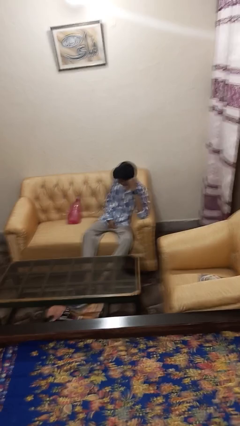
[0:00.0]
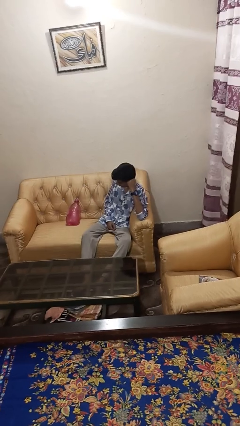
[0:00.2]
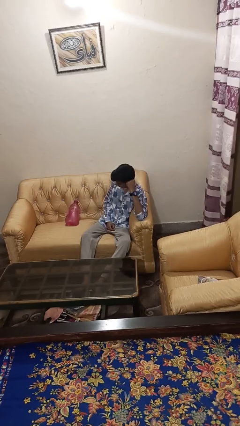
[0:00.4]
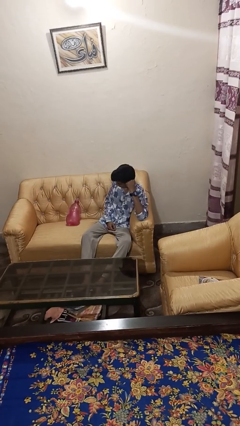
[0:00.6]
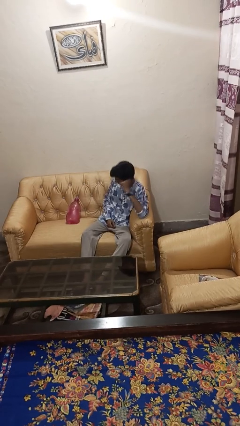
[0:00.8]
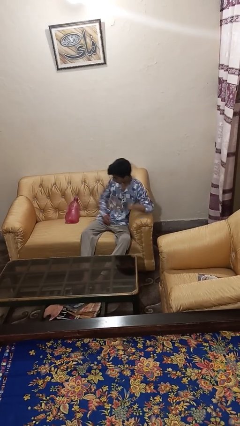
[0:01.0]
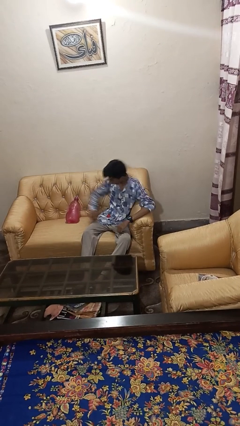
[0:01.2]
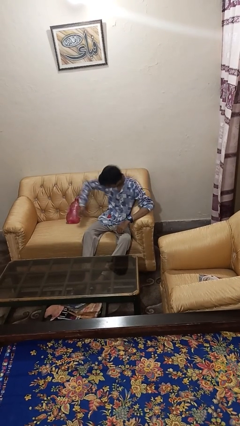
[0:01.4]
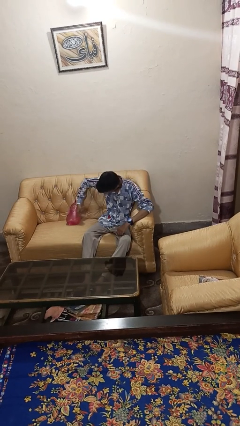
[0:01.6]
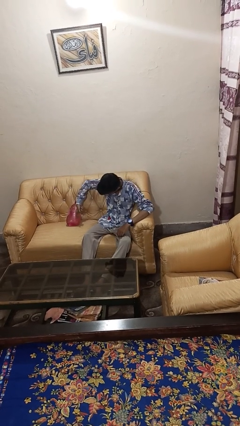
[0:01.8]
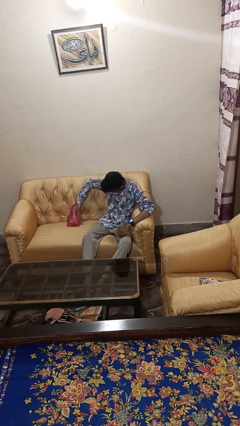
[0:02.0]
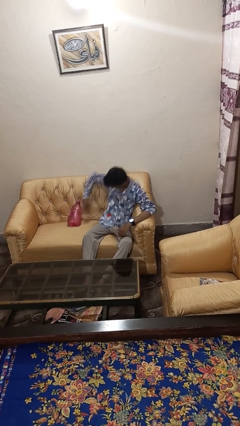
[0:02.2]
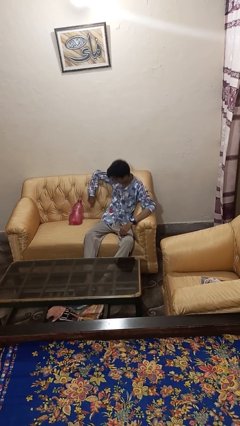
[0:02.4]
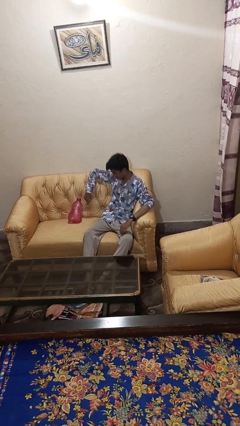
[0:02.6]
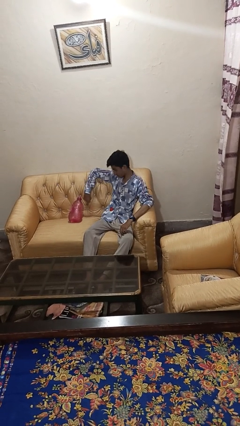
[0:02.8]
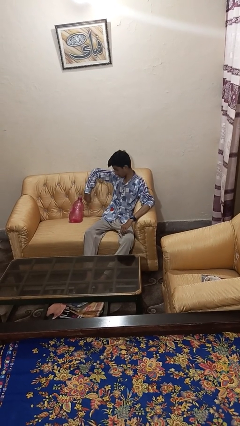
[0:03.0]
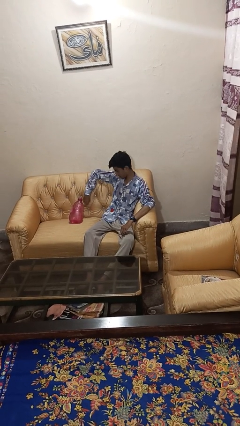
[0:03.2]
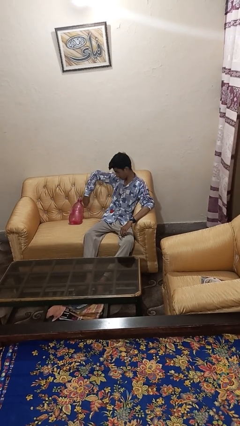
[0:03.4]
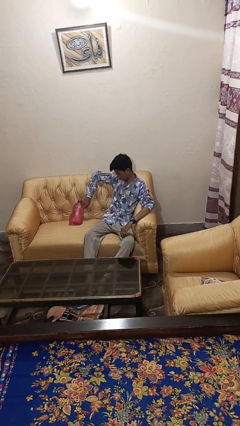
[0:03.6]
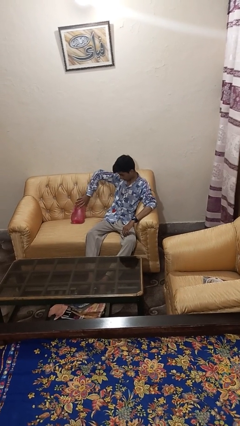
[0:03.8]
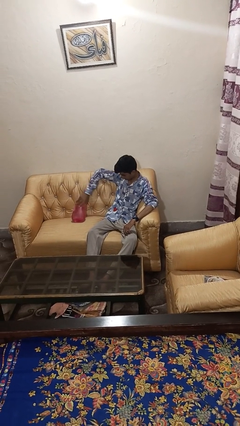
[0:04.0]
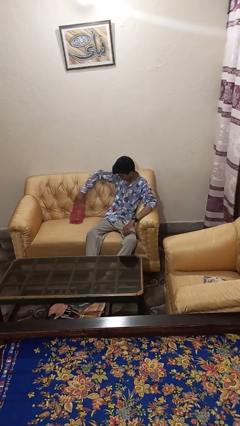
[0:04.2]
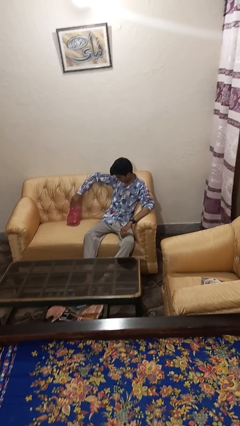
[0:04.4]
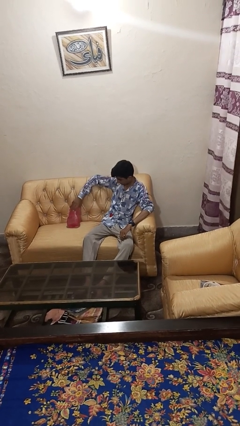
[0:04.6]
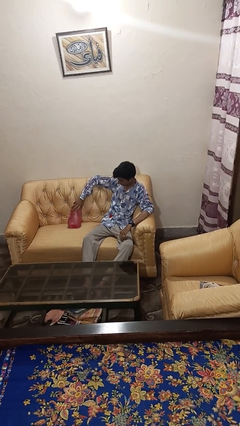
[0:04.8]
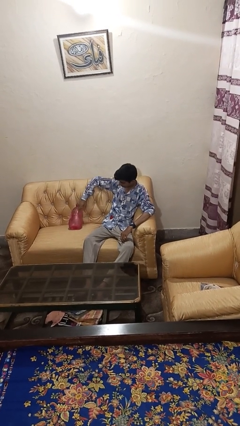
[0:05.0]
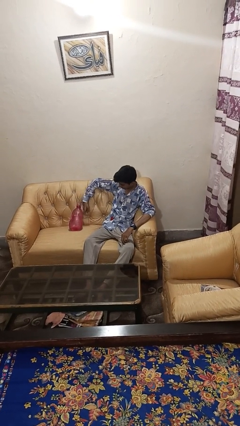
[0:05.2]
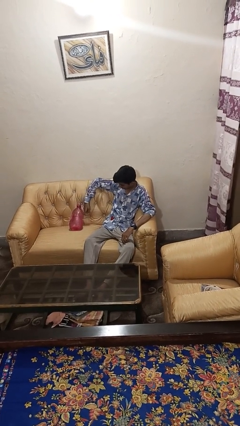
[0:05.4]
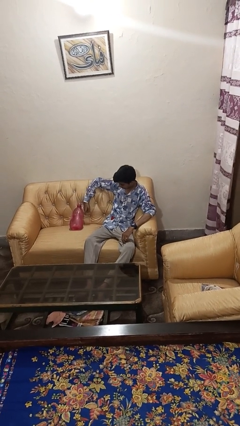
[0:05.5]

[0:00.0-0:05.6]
person taps object with finger

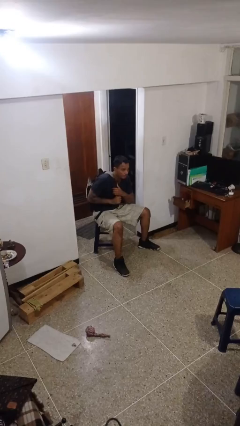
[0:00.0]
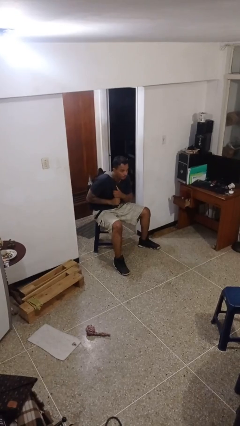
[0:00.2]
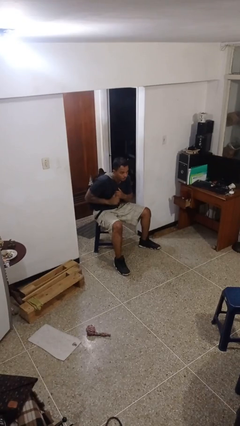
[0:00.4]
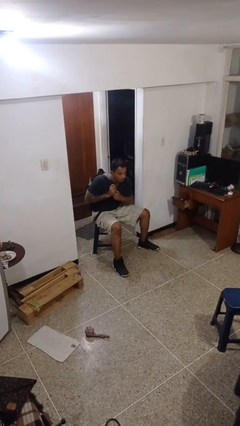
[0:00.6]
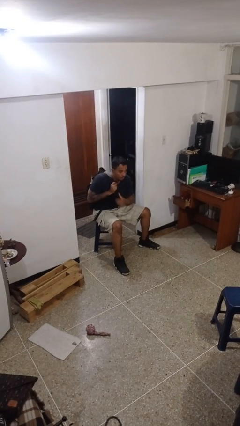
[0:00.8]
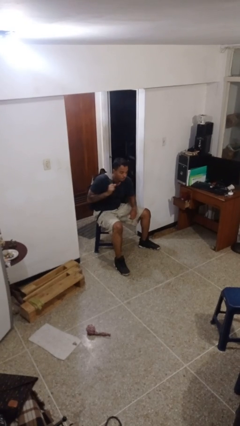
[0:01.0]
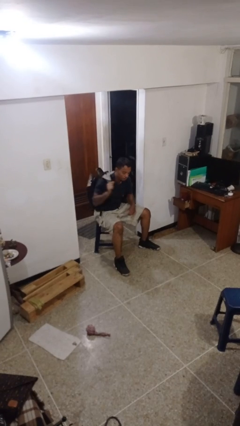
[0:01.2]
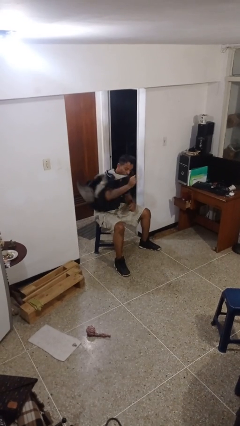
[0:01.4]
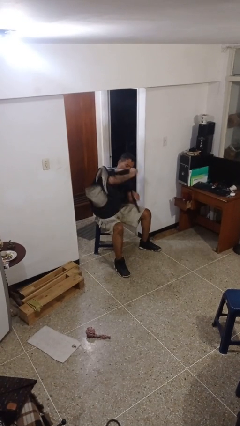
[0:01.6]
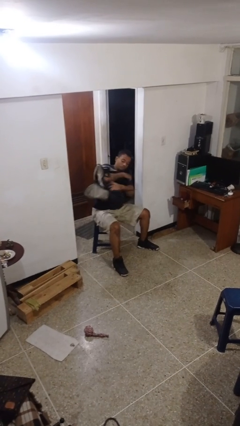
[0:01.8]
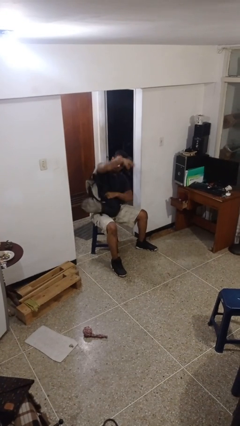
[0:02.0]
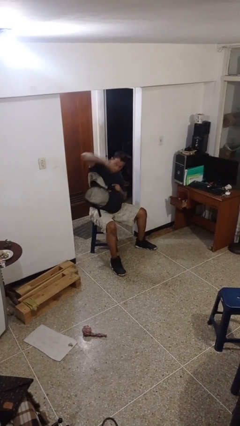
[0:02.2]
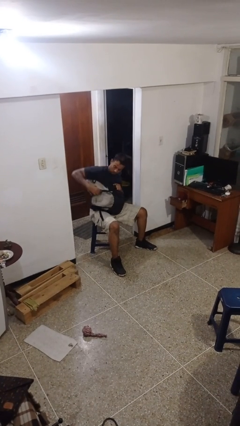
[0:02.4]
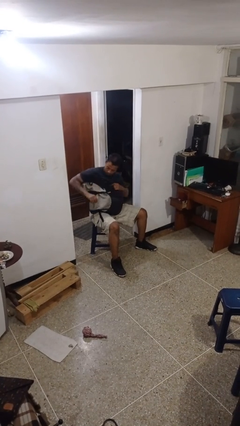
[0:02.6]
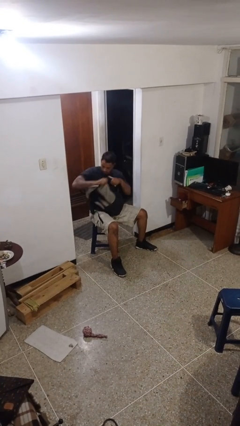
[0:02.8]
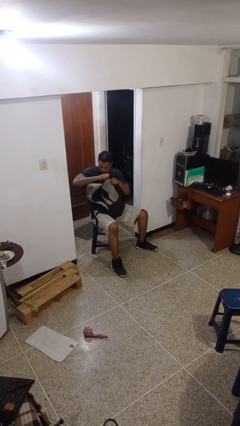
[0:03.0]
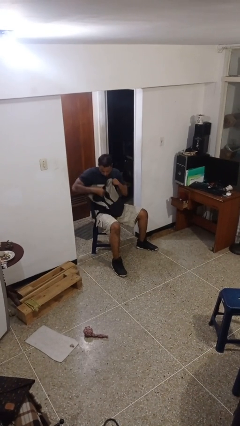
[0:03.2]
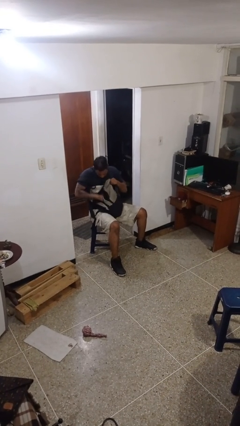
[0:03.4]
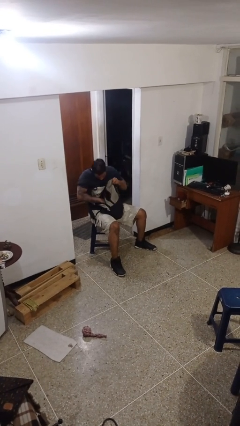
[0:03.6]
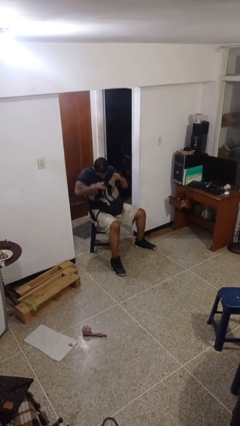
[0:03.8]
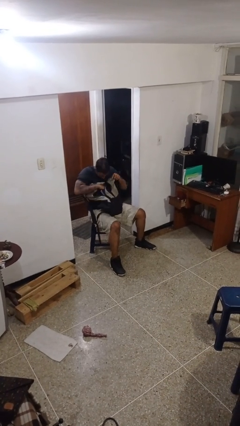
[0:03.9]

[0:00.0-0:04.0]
person searches in backpack

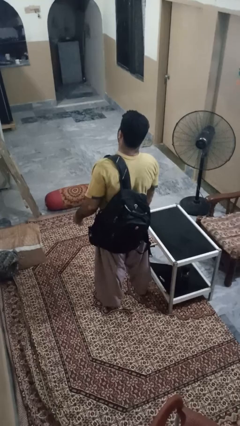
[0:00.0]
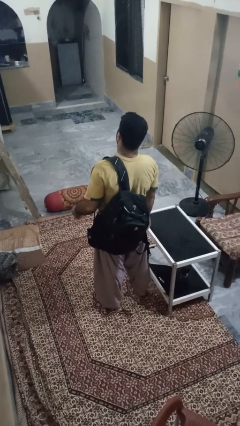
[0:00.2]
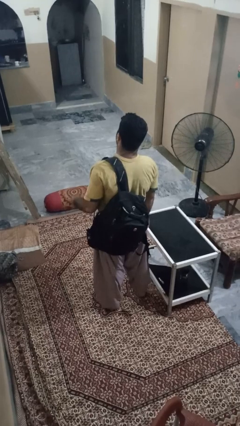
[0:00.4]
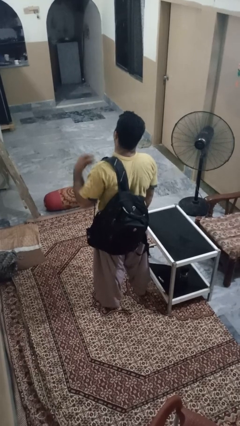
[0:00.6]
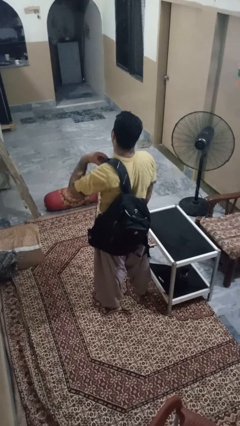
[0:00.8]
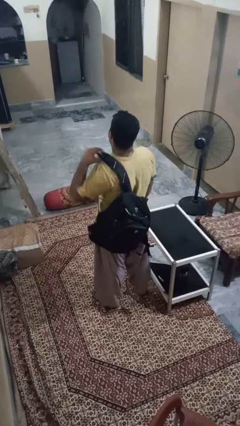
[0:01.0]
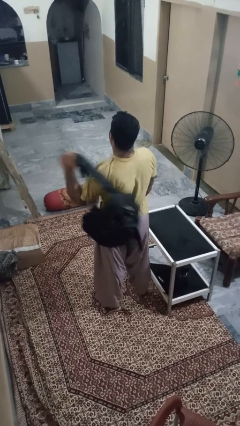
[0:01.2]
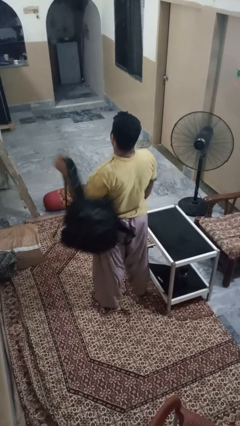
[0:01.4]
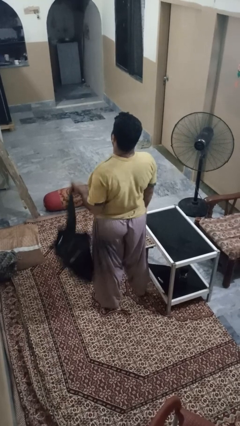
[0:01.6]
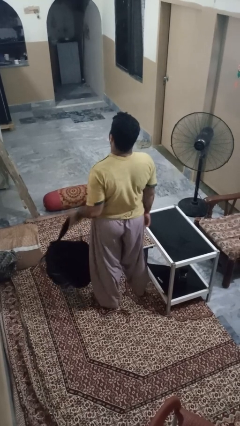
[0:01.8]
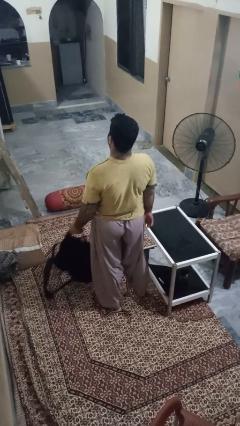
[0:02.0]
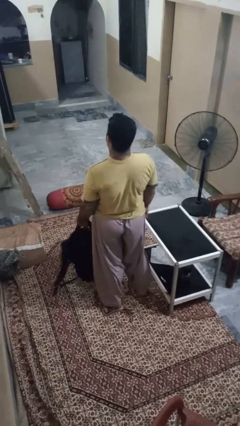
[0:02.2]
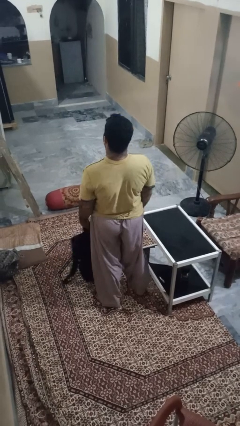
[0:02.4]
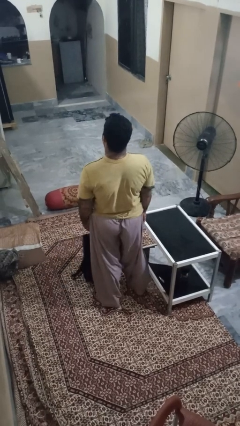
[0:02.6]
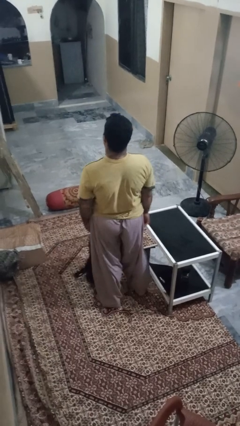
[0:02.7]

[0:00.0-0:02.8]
person takes off backpack

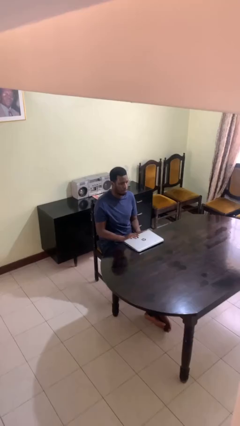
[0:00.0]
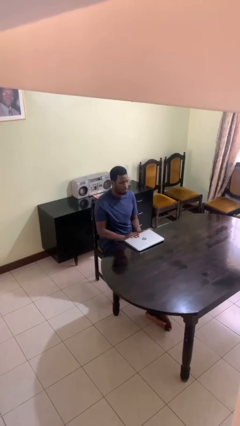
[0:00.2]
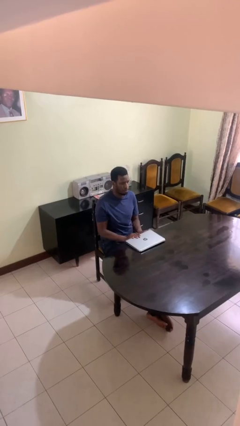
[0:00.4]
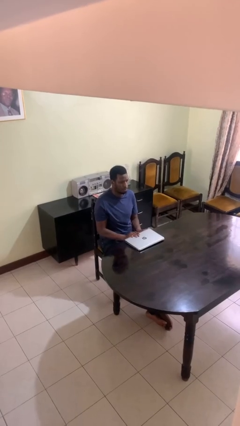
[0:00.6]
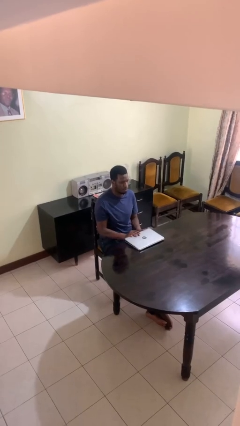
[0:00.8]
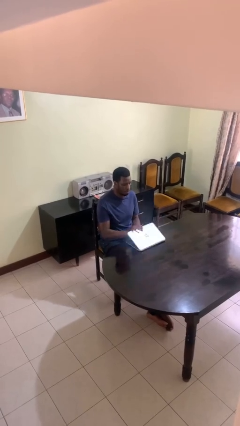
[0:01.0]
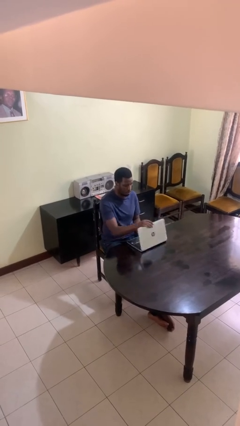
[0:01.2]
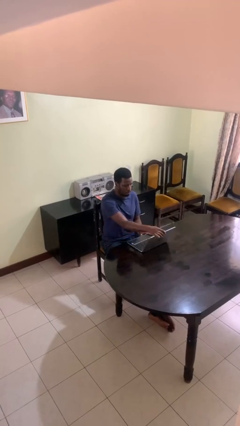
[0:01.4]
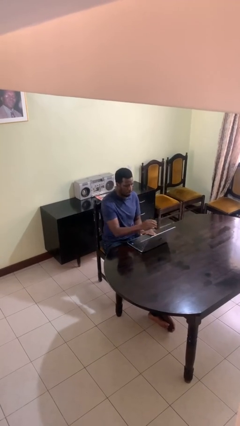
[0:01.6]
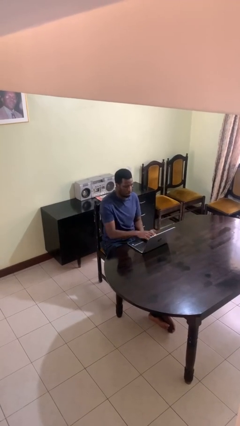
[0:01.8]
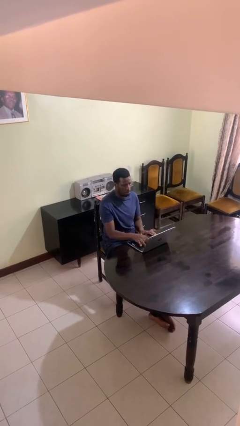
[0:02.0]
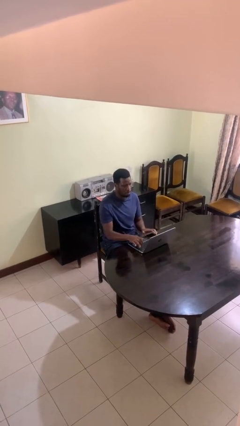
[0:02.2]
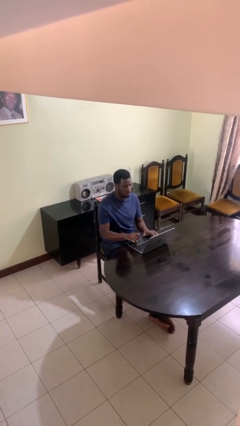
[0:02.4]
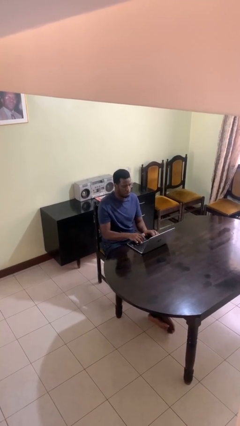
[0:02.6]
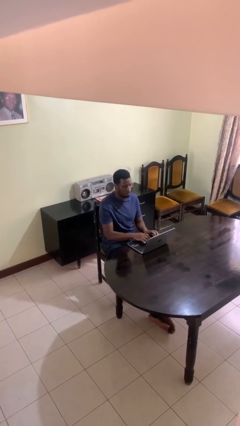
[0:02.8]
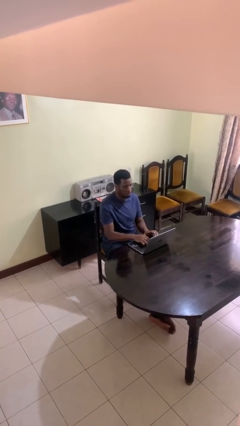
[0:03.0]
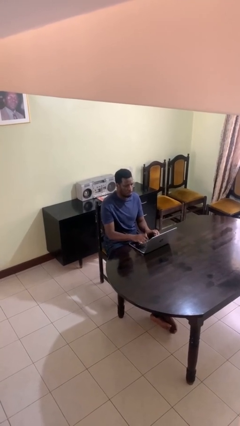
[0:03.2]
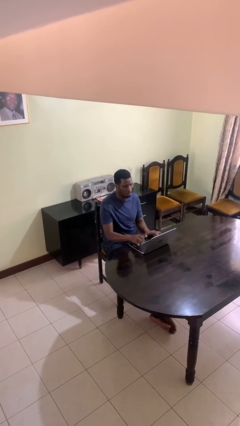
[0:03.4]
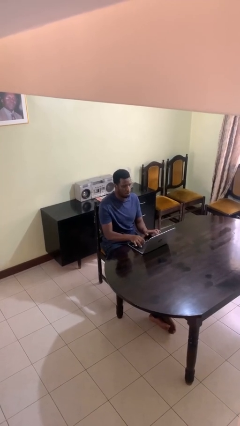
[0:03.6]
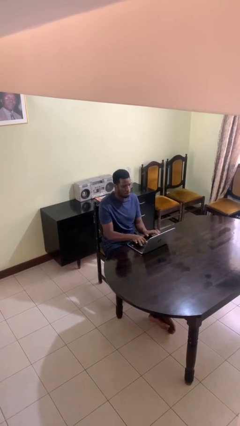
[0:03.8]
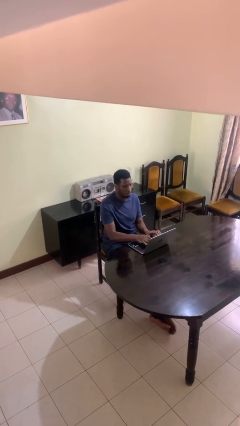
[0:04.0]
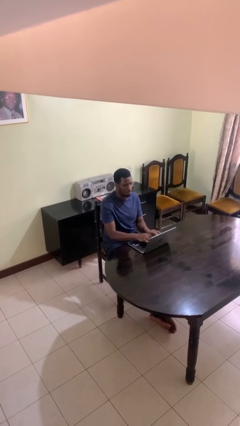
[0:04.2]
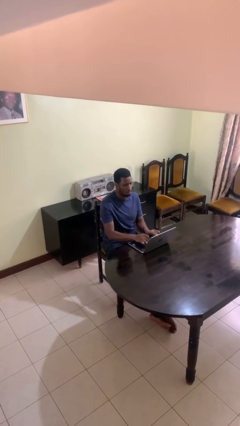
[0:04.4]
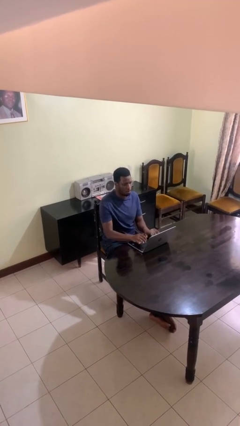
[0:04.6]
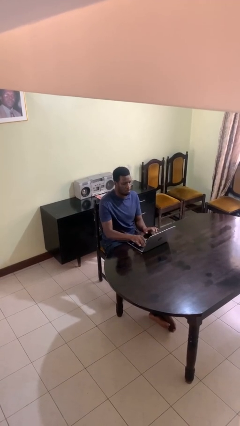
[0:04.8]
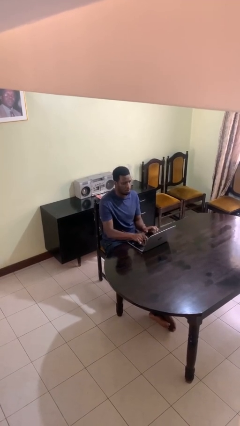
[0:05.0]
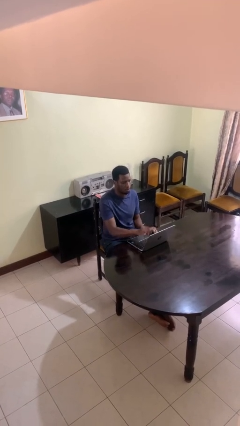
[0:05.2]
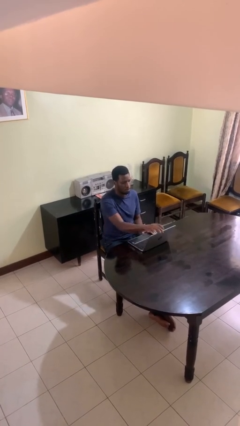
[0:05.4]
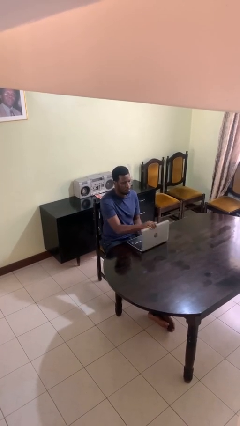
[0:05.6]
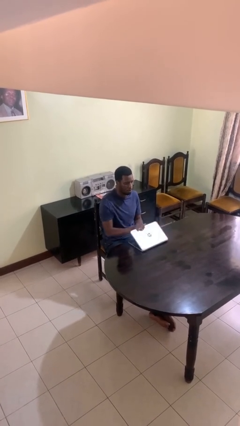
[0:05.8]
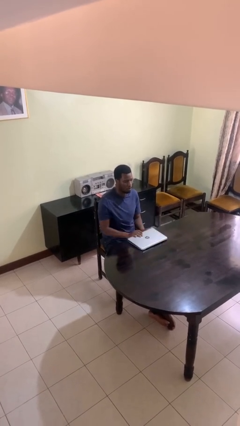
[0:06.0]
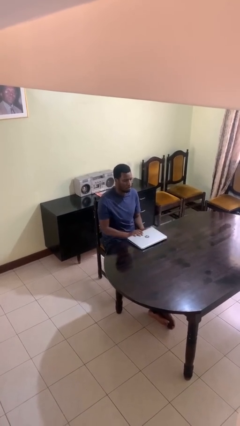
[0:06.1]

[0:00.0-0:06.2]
person interacts with laptop
